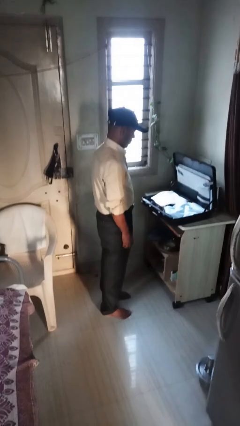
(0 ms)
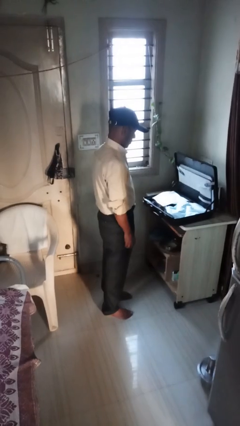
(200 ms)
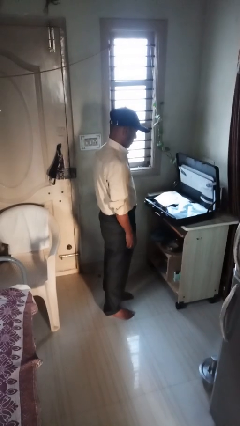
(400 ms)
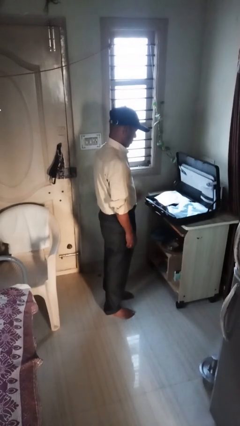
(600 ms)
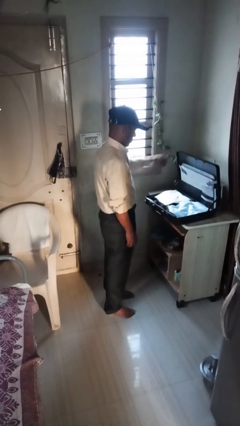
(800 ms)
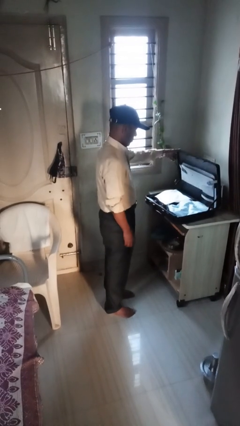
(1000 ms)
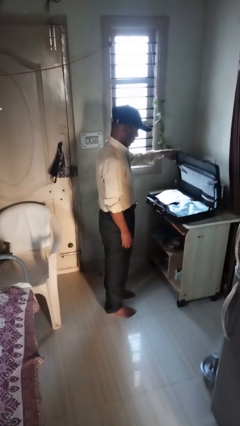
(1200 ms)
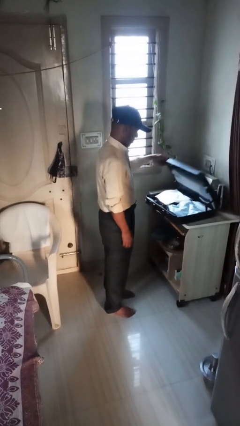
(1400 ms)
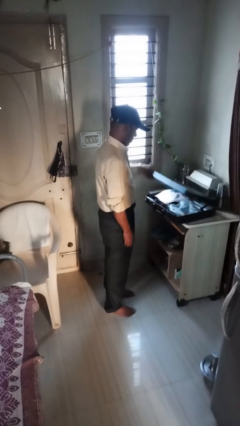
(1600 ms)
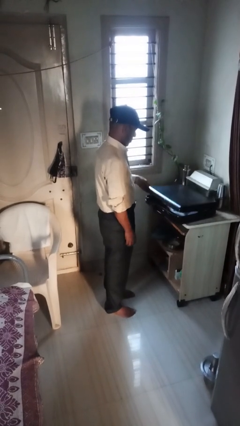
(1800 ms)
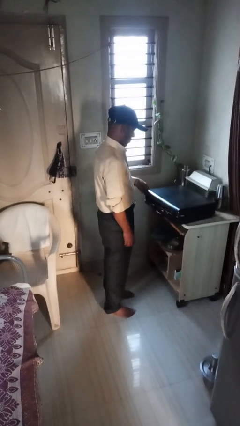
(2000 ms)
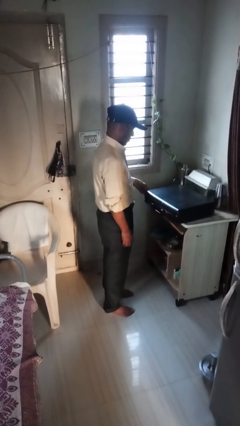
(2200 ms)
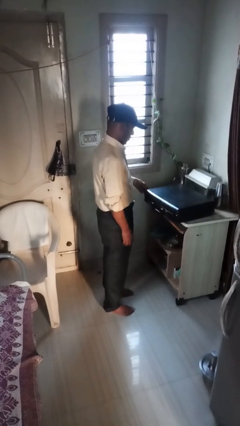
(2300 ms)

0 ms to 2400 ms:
person closes suitcase

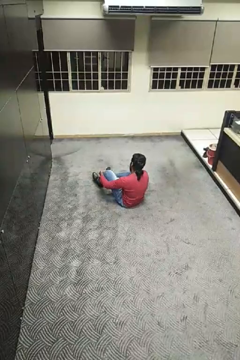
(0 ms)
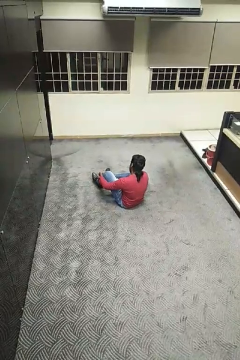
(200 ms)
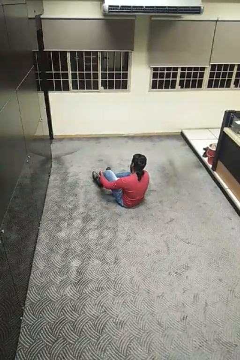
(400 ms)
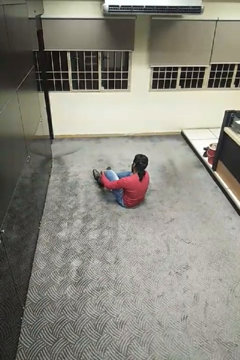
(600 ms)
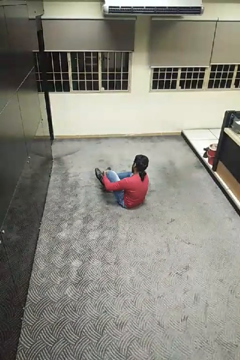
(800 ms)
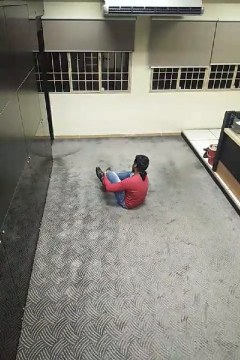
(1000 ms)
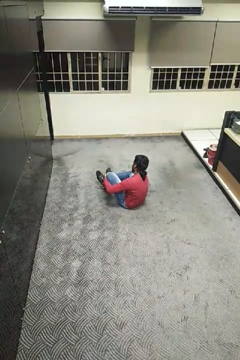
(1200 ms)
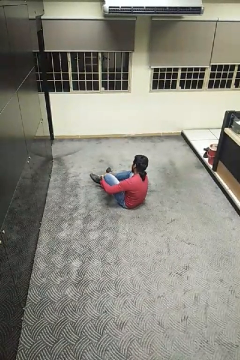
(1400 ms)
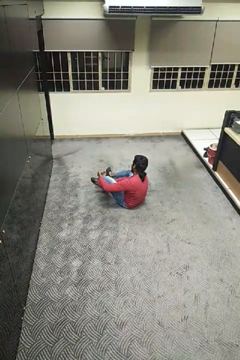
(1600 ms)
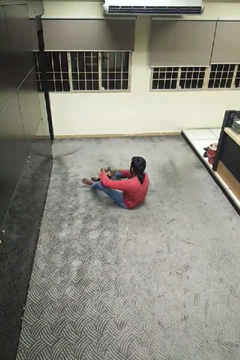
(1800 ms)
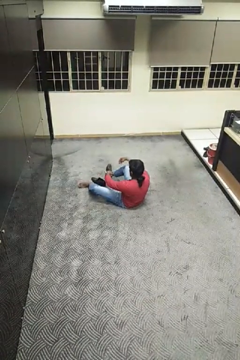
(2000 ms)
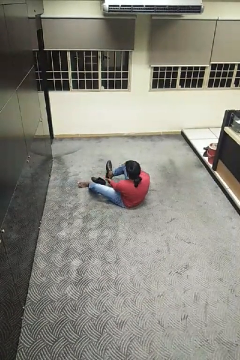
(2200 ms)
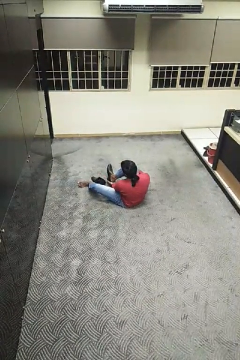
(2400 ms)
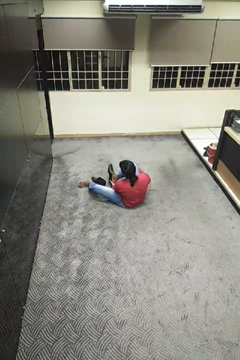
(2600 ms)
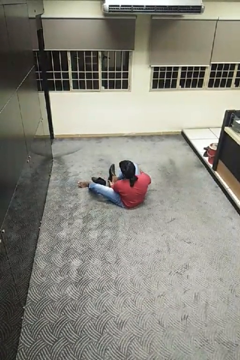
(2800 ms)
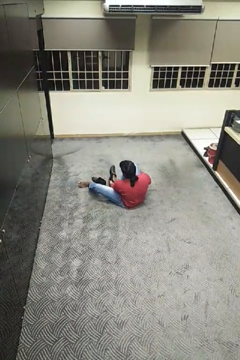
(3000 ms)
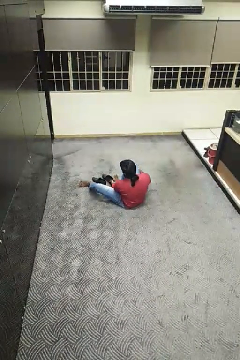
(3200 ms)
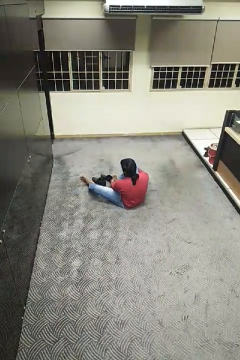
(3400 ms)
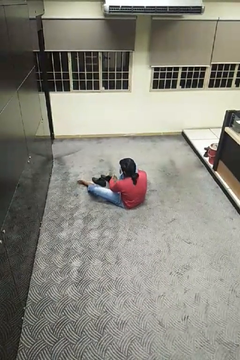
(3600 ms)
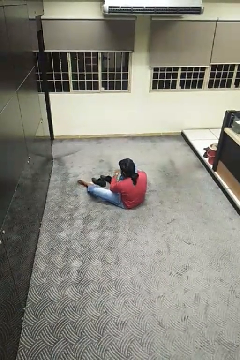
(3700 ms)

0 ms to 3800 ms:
person takes off shoes

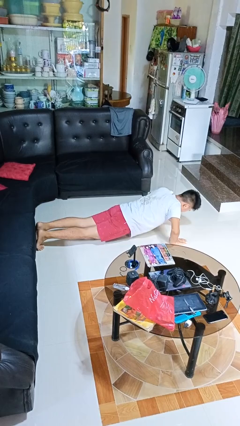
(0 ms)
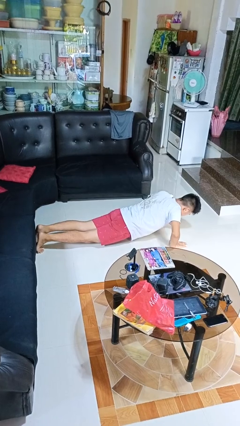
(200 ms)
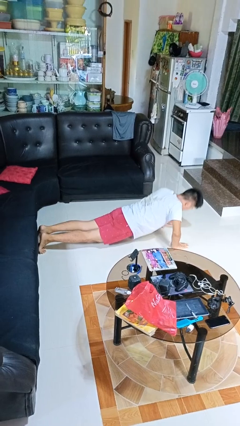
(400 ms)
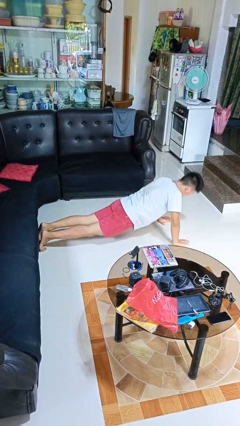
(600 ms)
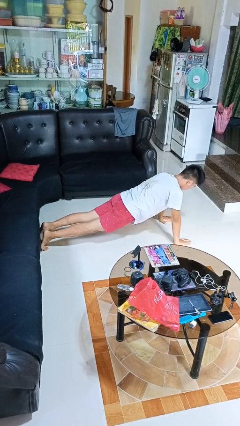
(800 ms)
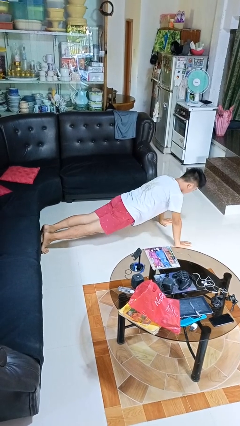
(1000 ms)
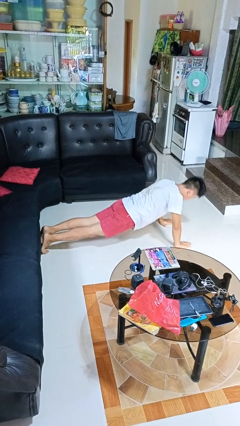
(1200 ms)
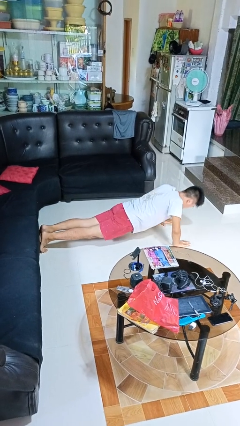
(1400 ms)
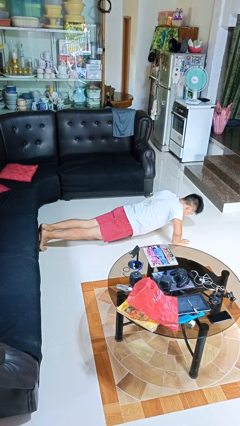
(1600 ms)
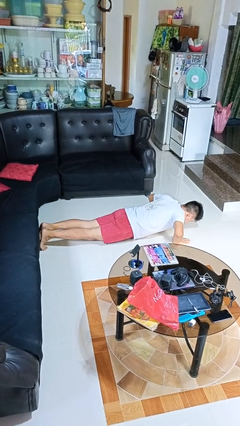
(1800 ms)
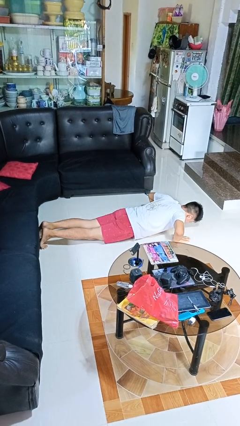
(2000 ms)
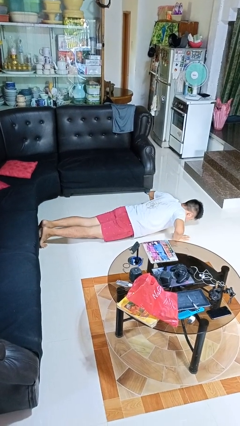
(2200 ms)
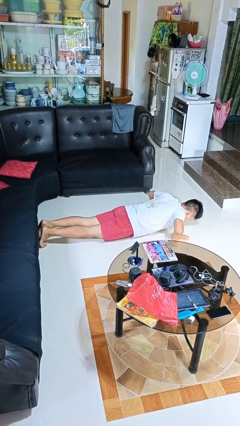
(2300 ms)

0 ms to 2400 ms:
person exercises with pushup

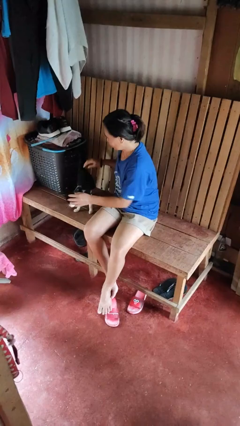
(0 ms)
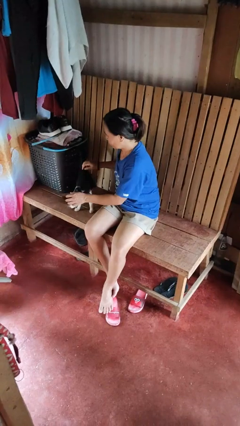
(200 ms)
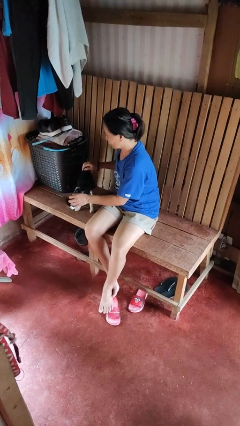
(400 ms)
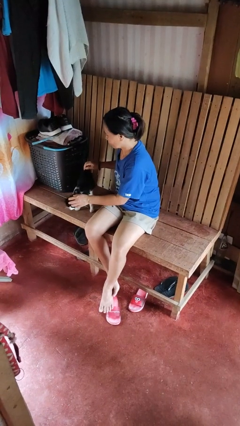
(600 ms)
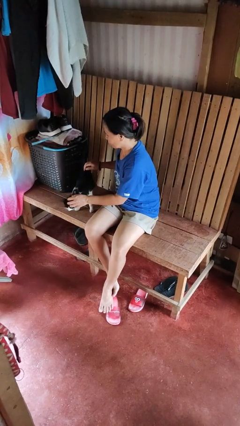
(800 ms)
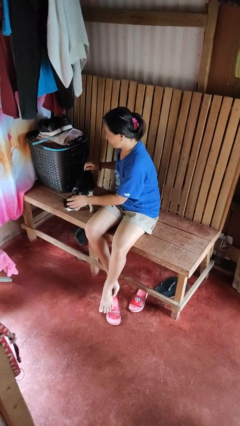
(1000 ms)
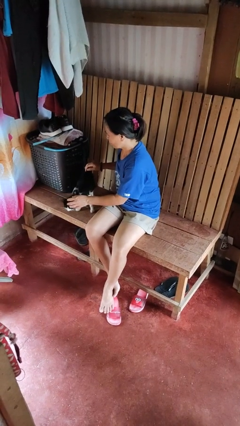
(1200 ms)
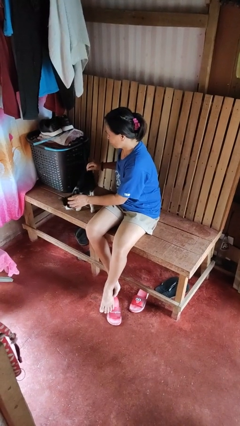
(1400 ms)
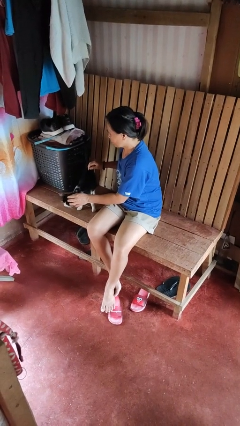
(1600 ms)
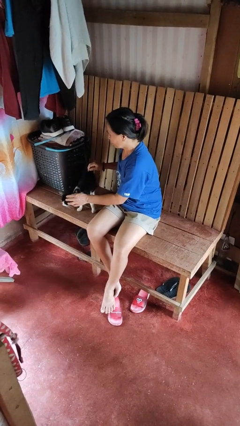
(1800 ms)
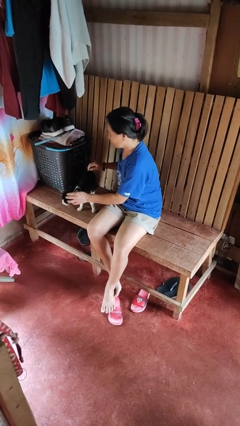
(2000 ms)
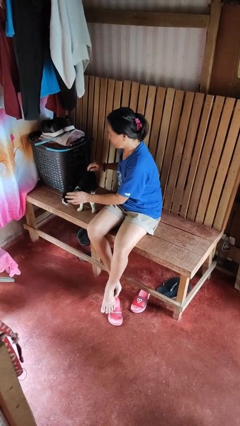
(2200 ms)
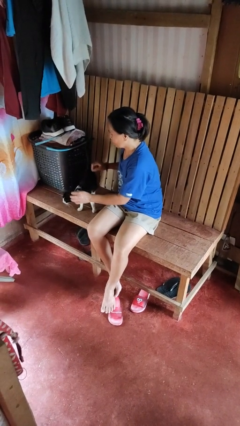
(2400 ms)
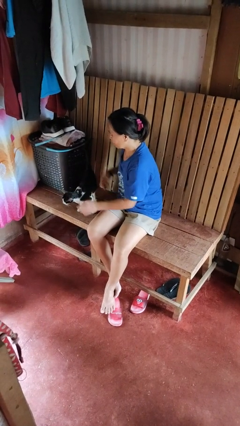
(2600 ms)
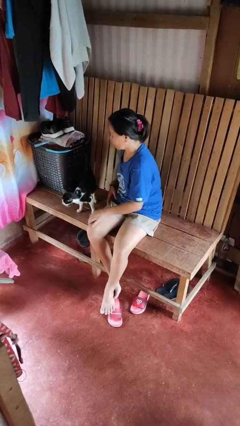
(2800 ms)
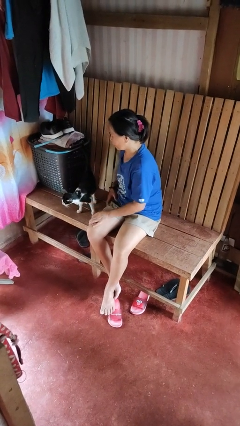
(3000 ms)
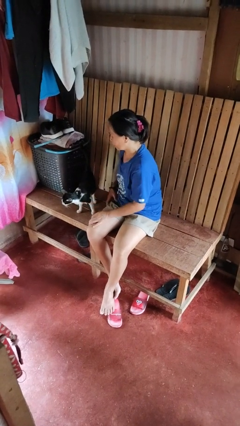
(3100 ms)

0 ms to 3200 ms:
person pets cat

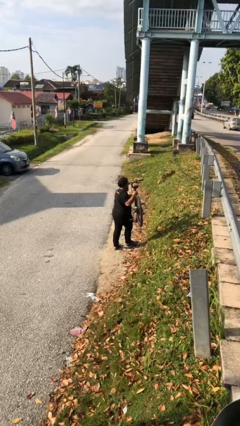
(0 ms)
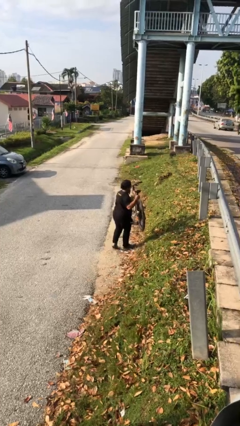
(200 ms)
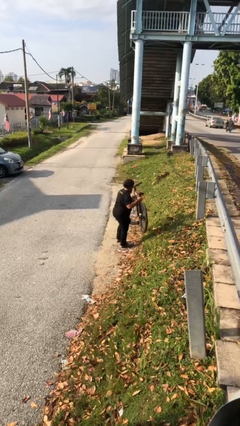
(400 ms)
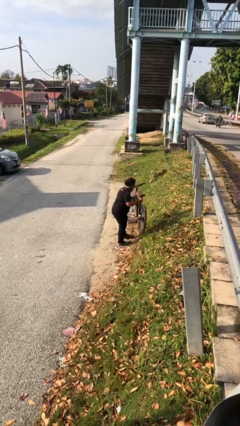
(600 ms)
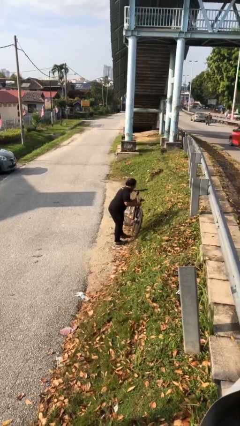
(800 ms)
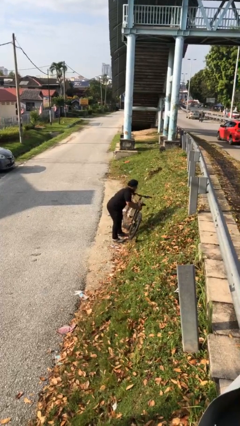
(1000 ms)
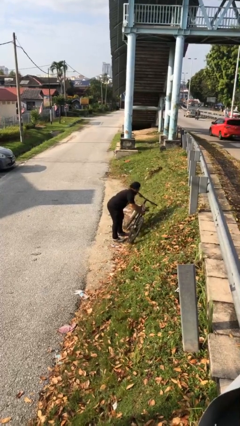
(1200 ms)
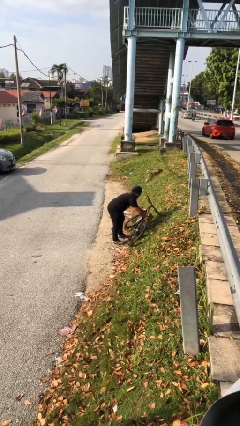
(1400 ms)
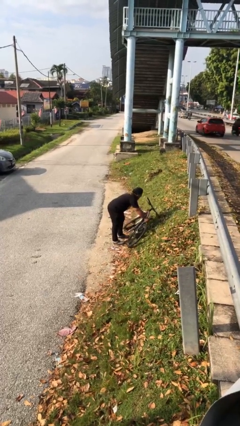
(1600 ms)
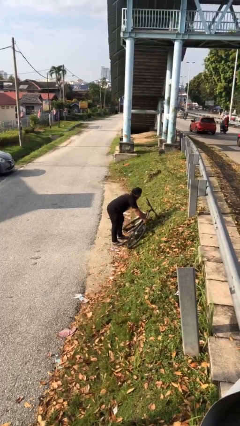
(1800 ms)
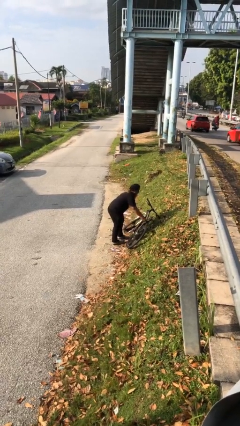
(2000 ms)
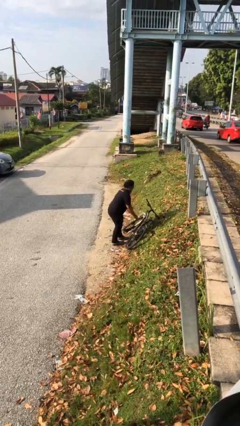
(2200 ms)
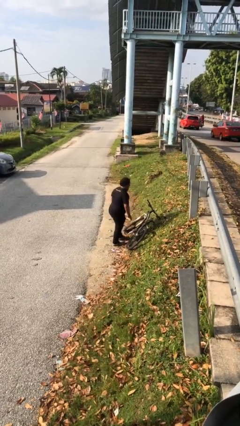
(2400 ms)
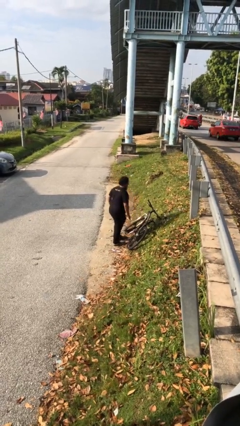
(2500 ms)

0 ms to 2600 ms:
person puts down object on floor

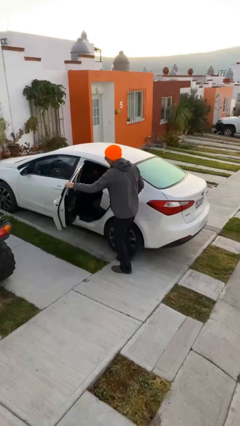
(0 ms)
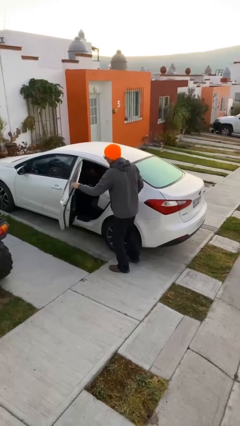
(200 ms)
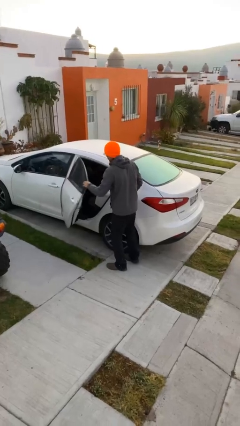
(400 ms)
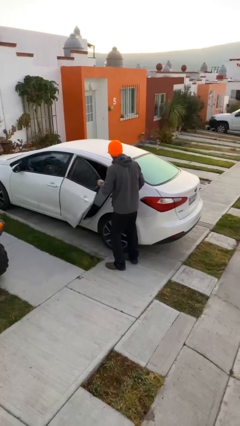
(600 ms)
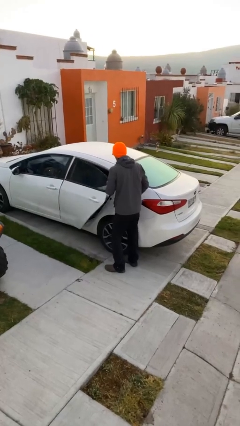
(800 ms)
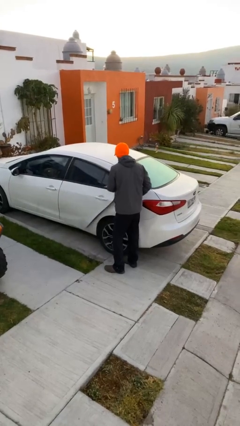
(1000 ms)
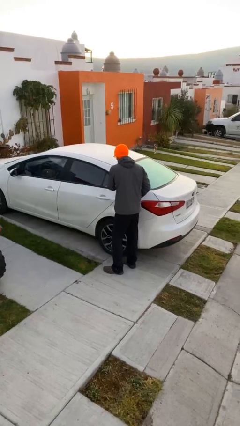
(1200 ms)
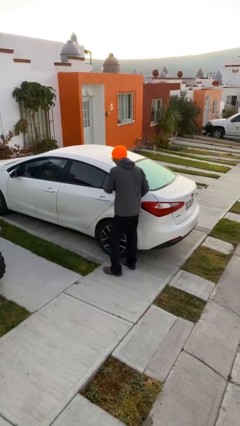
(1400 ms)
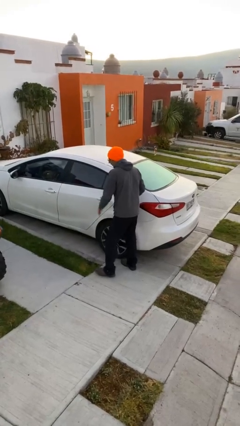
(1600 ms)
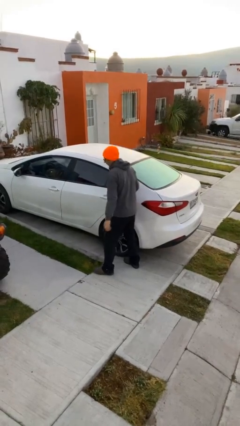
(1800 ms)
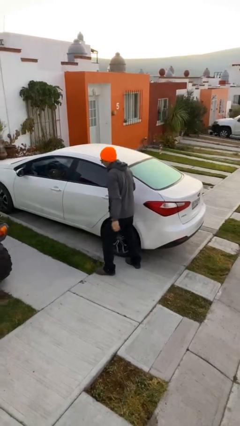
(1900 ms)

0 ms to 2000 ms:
person closes car door

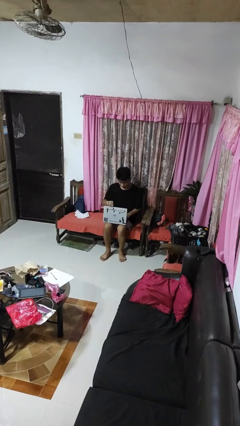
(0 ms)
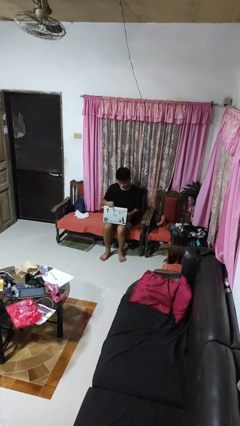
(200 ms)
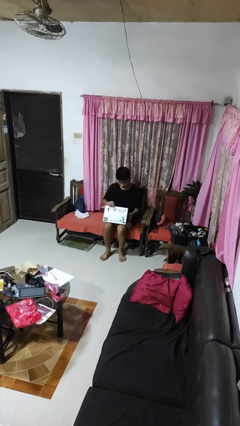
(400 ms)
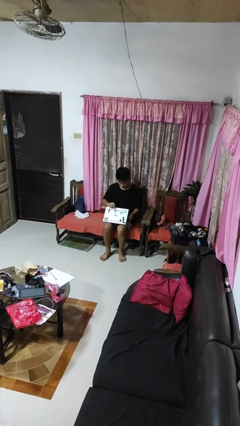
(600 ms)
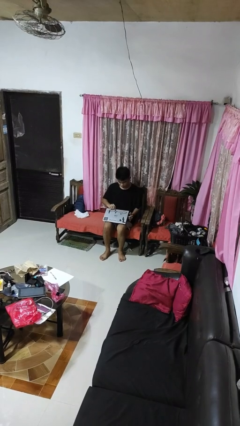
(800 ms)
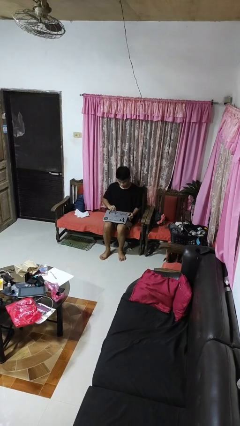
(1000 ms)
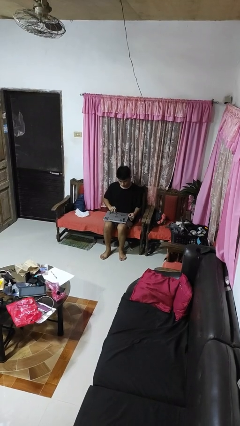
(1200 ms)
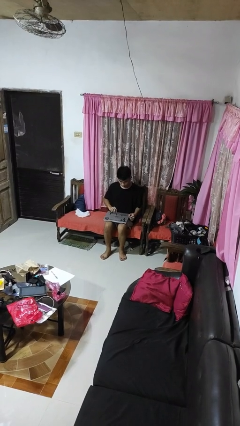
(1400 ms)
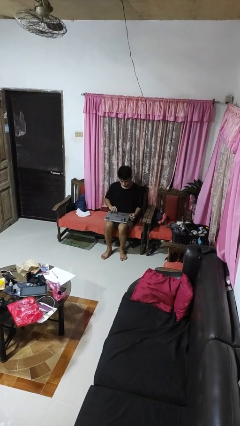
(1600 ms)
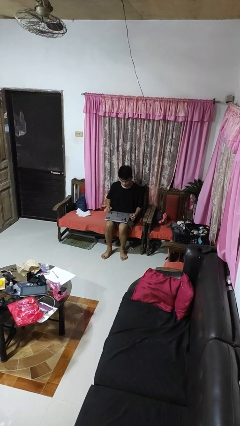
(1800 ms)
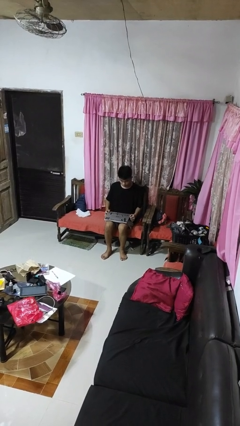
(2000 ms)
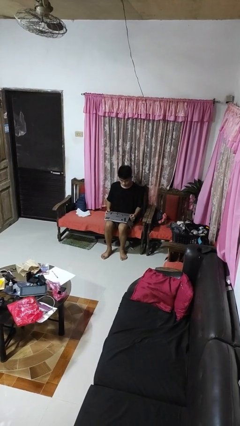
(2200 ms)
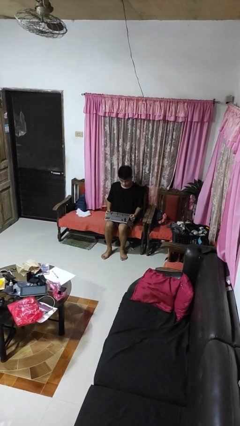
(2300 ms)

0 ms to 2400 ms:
person closes laptop
